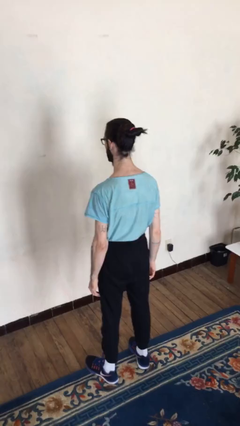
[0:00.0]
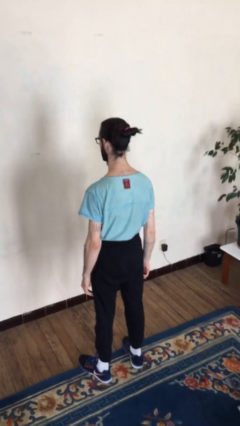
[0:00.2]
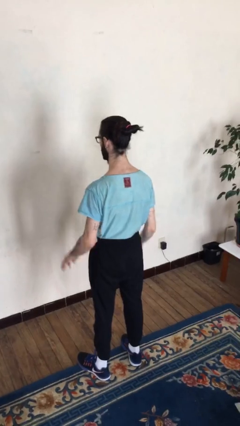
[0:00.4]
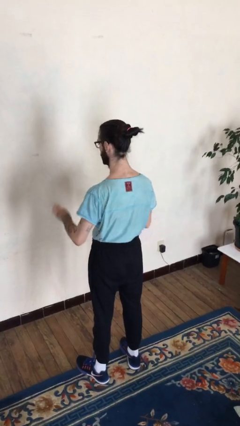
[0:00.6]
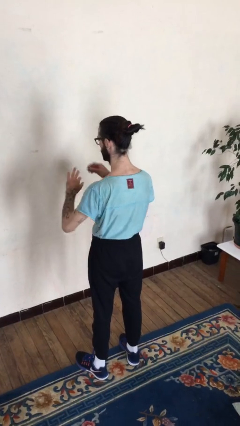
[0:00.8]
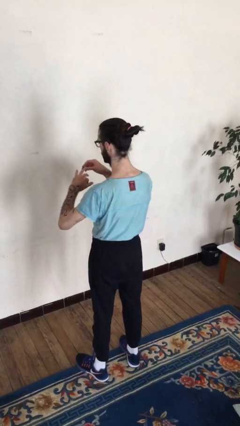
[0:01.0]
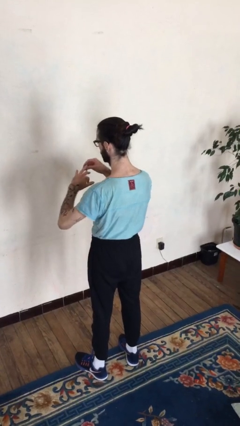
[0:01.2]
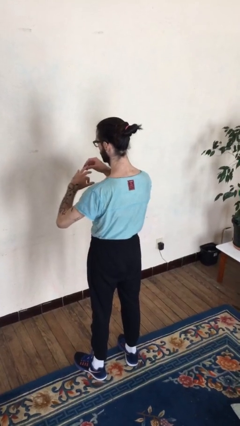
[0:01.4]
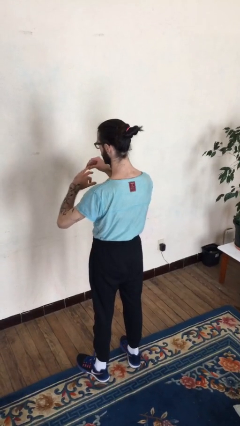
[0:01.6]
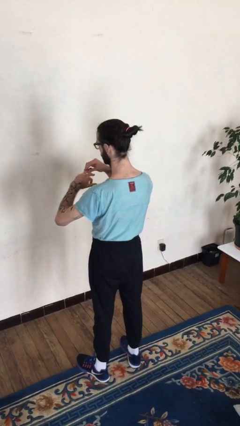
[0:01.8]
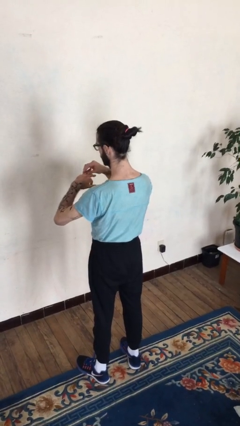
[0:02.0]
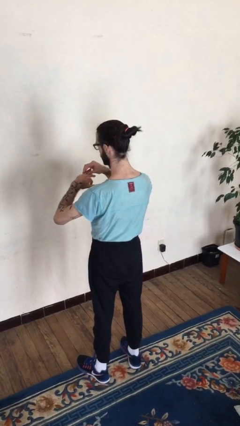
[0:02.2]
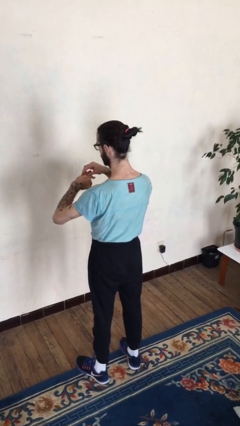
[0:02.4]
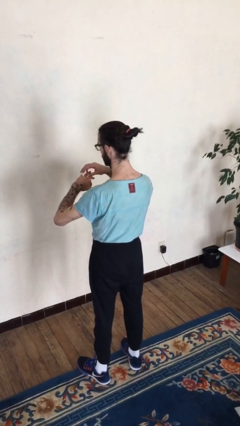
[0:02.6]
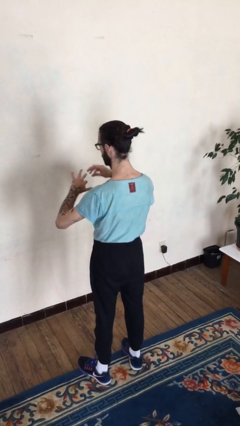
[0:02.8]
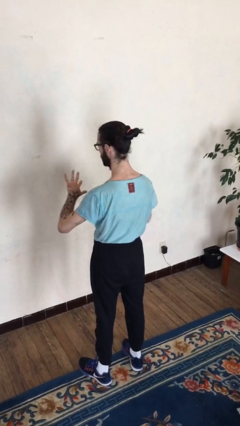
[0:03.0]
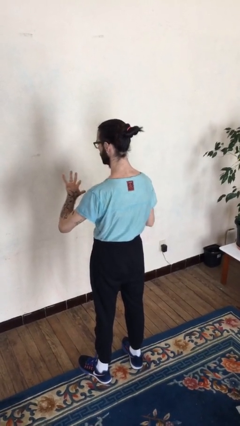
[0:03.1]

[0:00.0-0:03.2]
person puts on ring

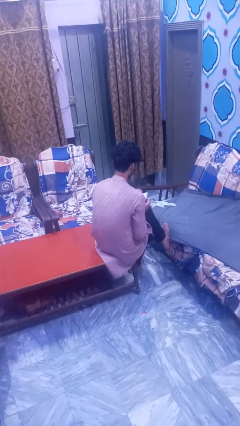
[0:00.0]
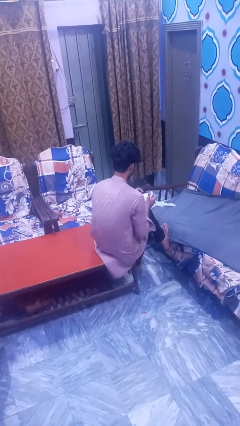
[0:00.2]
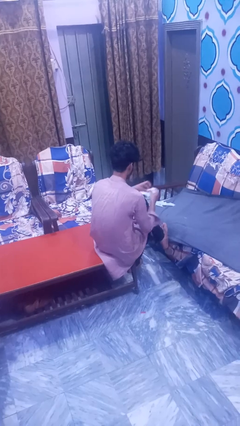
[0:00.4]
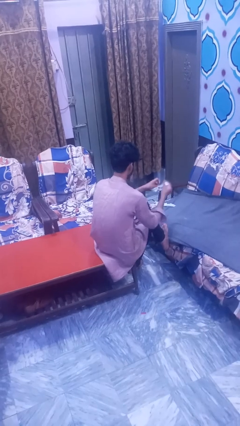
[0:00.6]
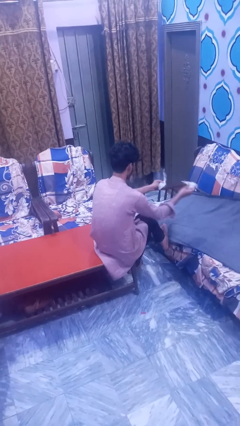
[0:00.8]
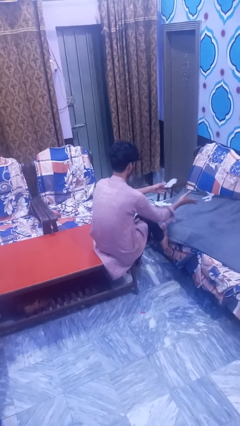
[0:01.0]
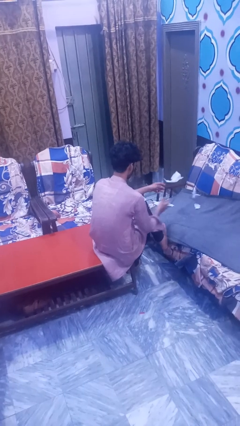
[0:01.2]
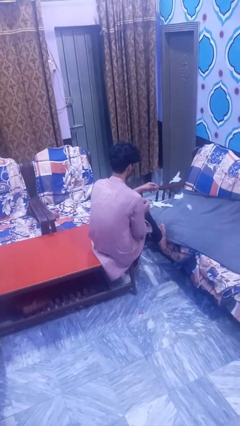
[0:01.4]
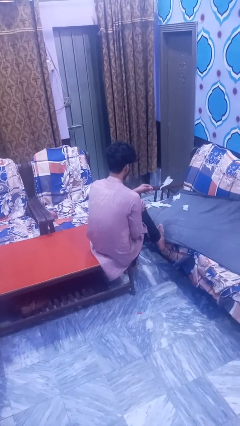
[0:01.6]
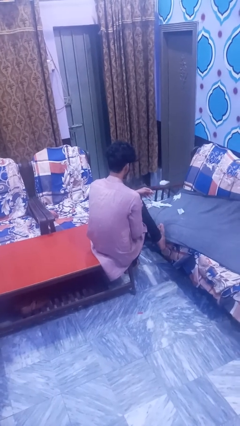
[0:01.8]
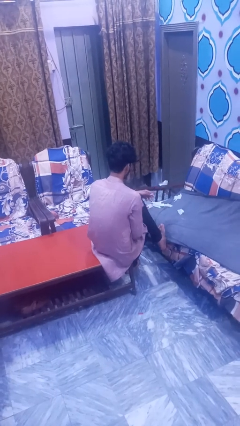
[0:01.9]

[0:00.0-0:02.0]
person tears paper

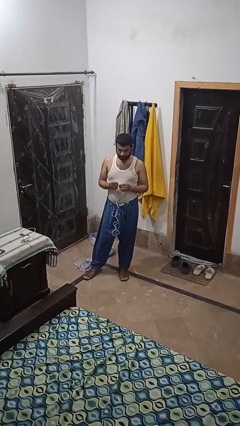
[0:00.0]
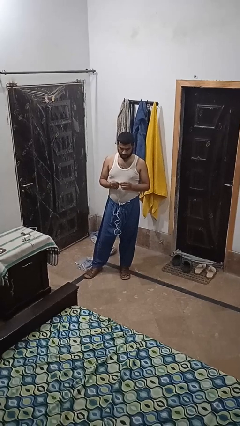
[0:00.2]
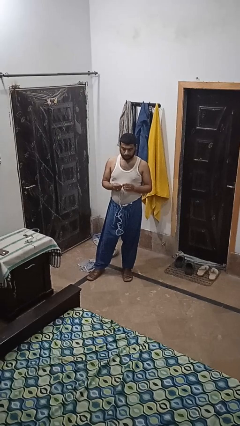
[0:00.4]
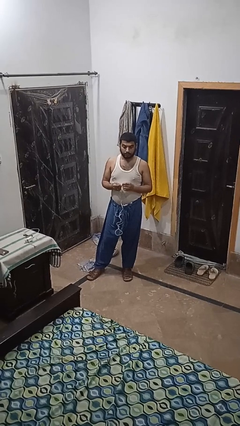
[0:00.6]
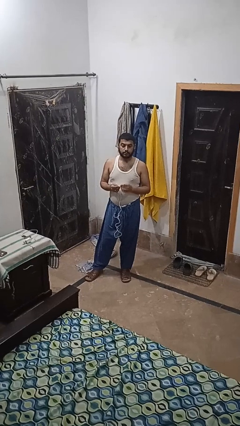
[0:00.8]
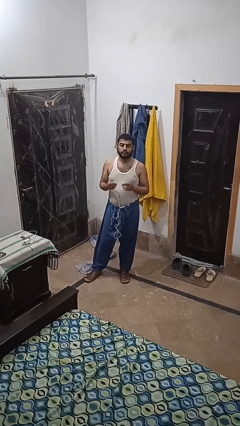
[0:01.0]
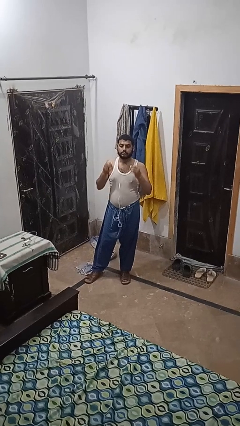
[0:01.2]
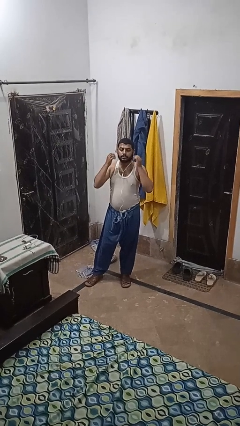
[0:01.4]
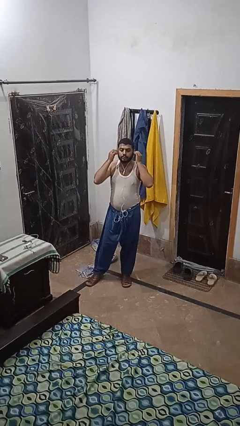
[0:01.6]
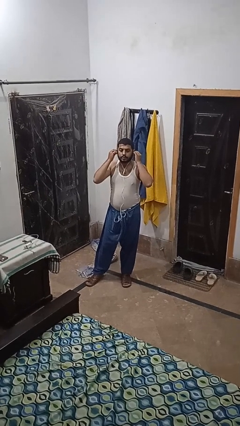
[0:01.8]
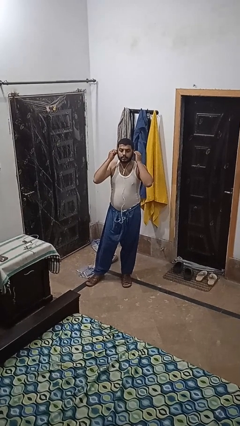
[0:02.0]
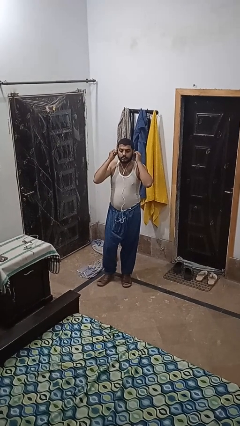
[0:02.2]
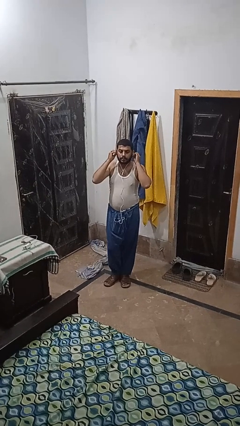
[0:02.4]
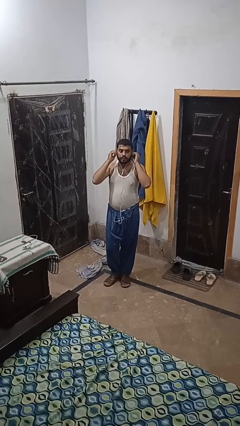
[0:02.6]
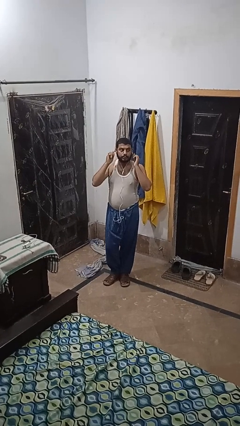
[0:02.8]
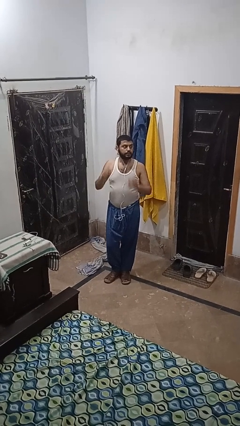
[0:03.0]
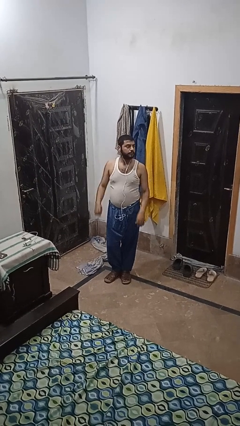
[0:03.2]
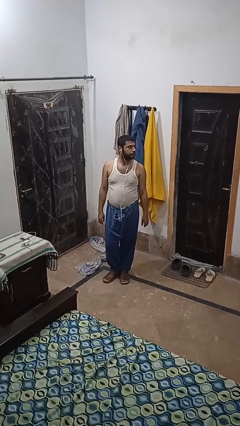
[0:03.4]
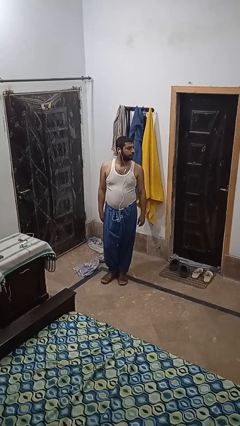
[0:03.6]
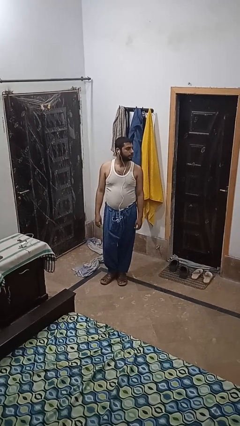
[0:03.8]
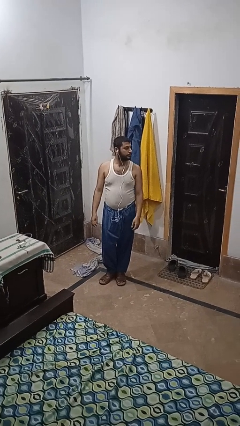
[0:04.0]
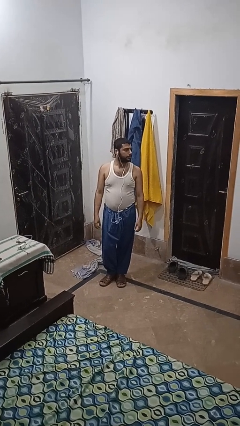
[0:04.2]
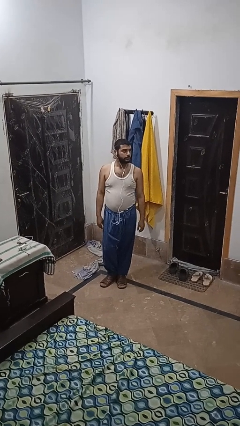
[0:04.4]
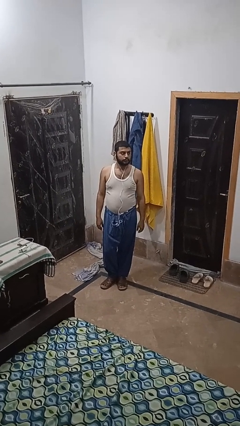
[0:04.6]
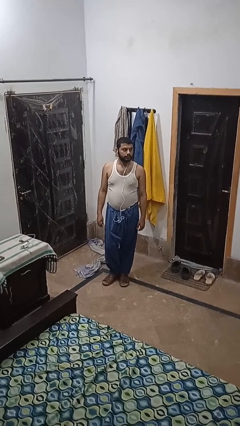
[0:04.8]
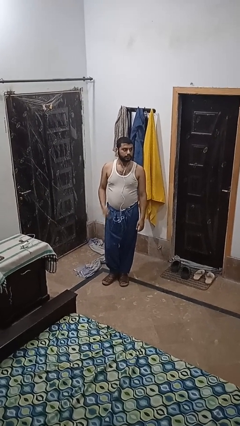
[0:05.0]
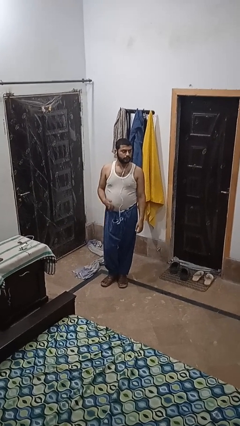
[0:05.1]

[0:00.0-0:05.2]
person puts on headphones

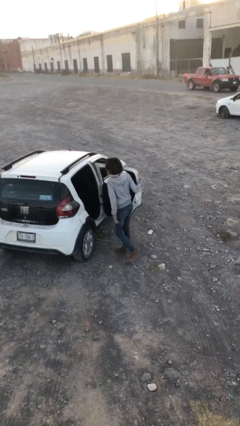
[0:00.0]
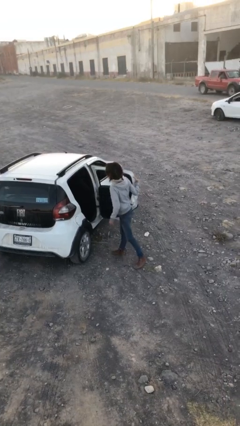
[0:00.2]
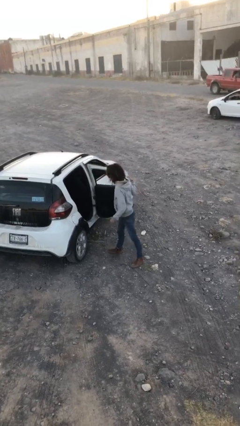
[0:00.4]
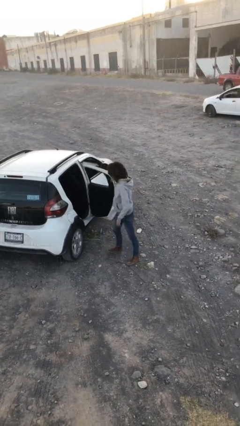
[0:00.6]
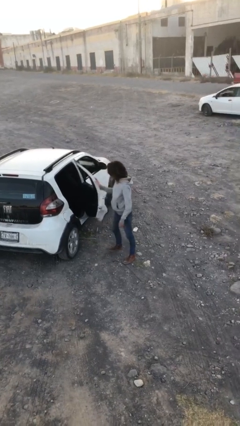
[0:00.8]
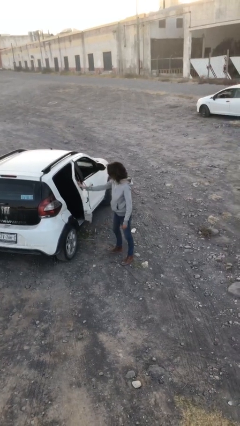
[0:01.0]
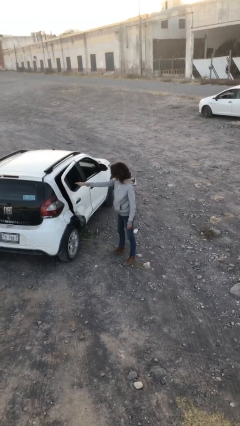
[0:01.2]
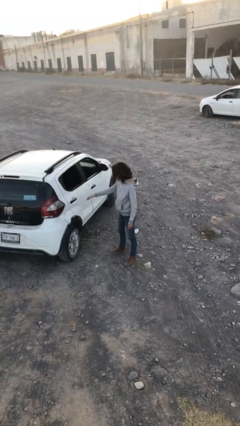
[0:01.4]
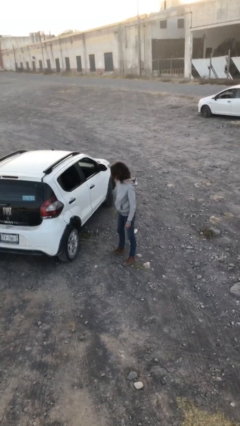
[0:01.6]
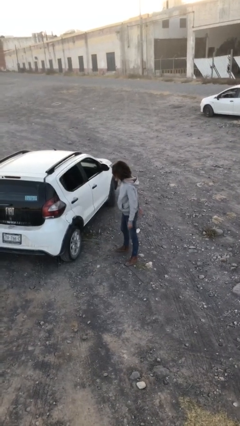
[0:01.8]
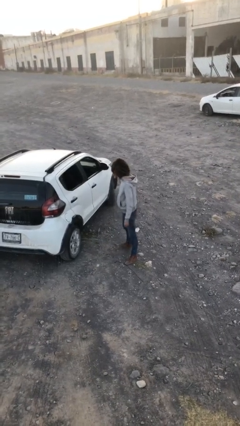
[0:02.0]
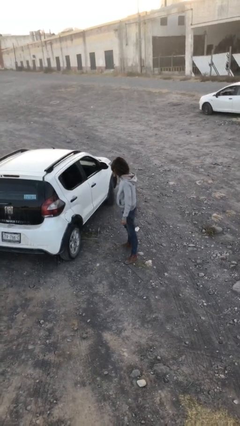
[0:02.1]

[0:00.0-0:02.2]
person closes car door

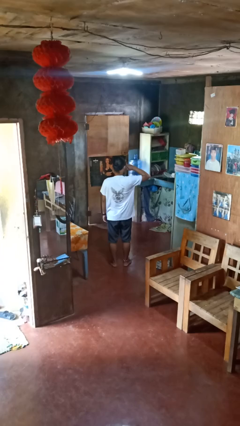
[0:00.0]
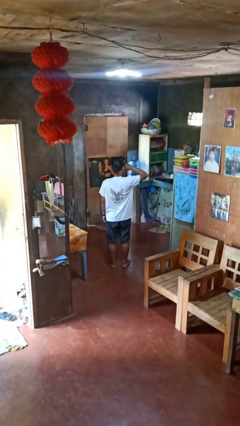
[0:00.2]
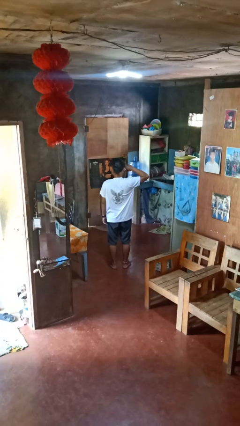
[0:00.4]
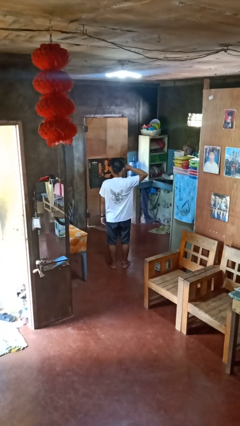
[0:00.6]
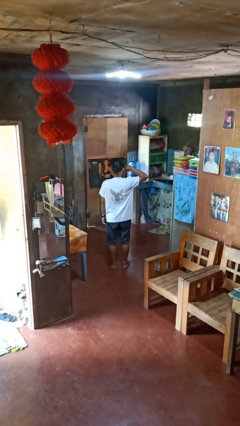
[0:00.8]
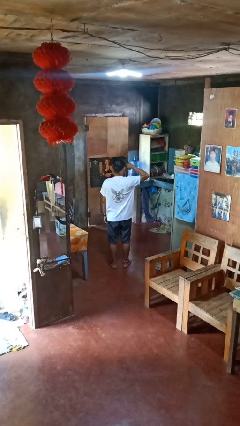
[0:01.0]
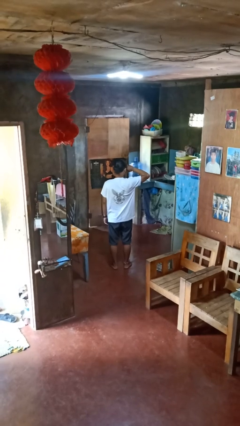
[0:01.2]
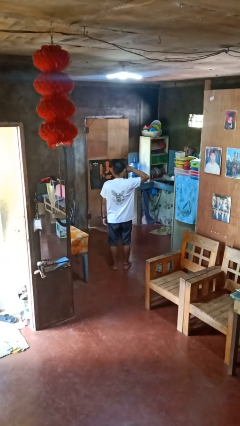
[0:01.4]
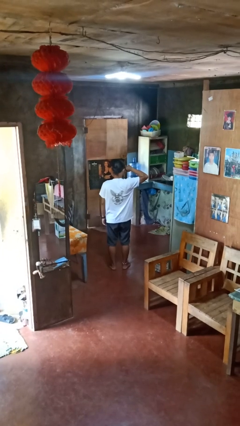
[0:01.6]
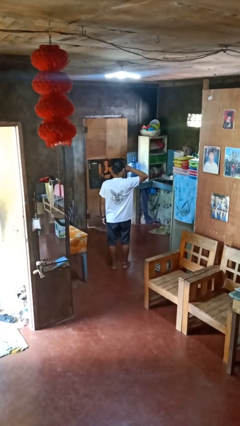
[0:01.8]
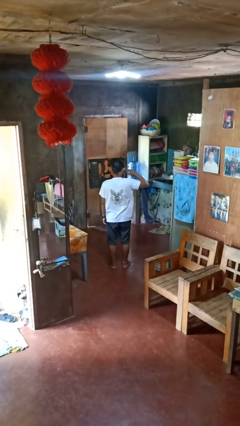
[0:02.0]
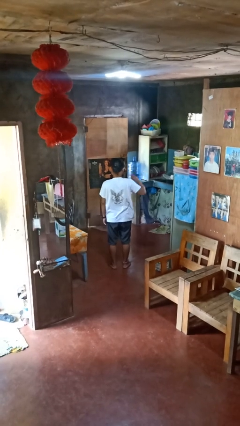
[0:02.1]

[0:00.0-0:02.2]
person rubs eyes

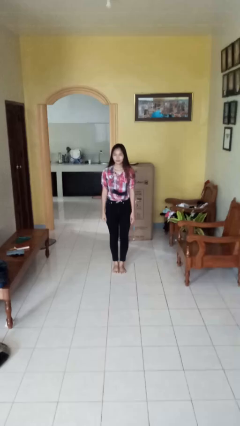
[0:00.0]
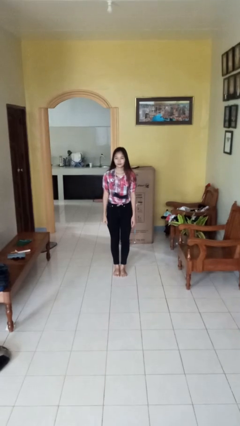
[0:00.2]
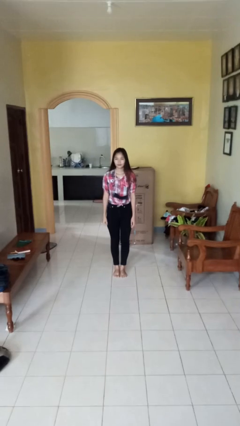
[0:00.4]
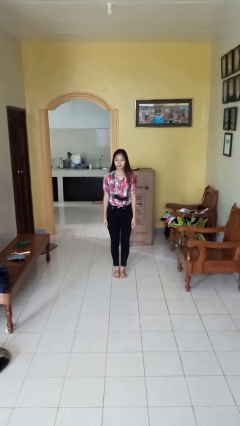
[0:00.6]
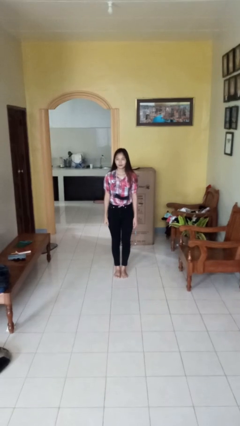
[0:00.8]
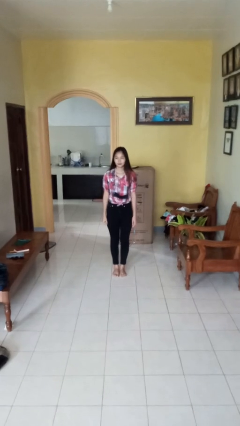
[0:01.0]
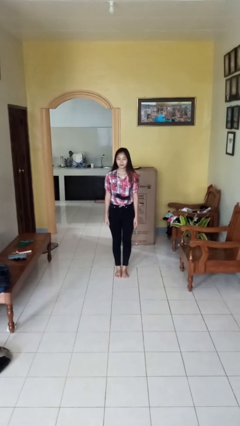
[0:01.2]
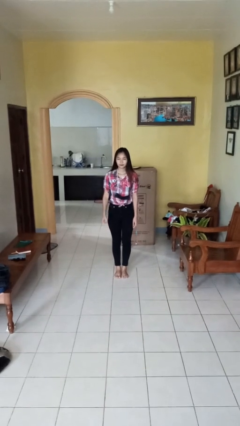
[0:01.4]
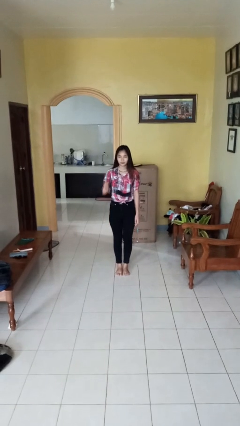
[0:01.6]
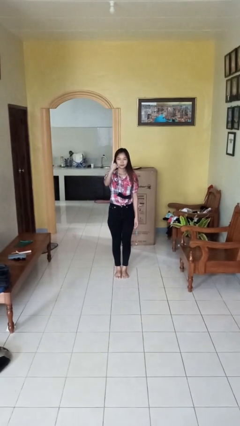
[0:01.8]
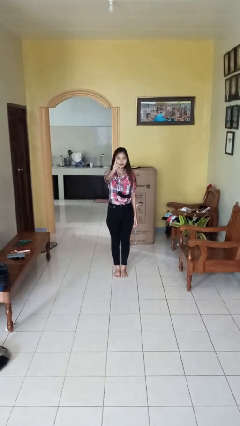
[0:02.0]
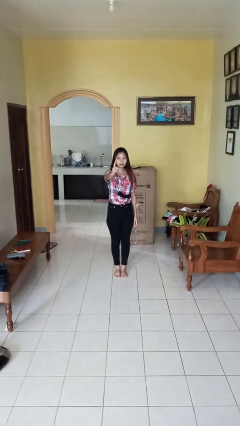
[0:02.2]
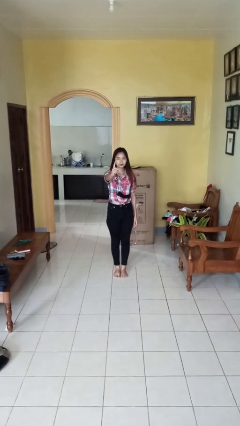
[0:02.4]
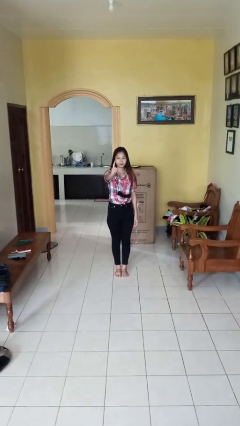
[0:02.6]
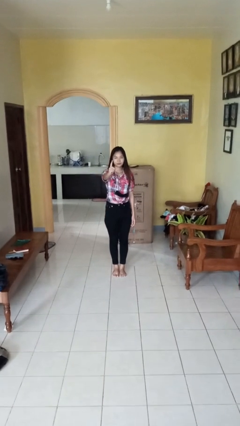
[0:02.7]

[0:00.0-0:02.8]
person gestures number one
